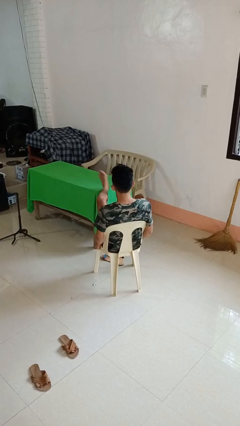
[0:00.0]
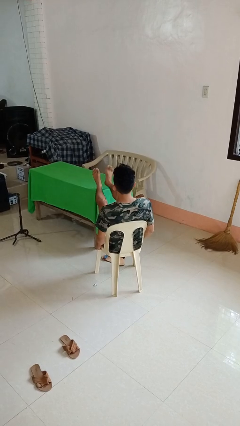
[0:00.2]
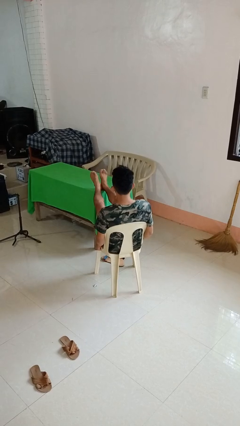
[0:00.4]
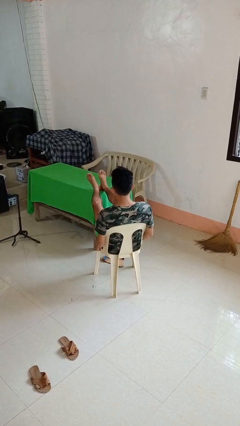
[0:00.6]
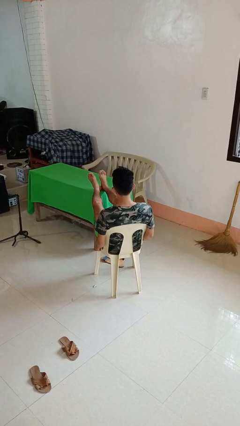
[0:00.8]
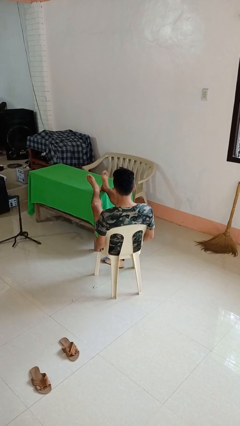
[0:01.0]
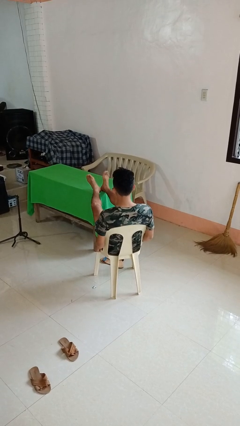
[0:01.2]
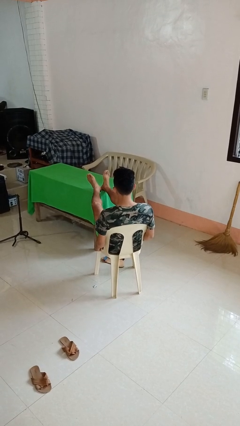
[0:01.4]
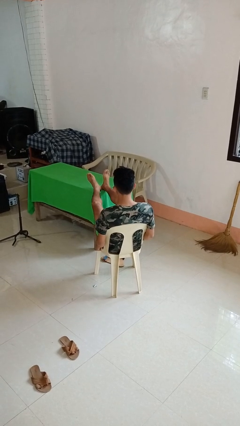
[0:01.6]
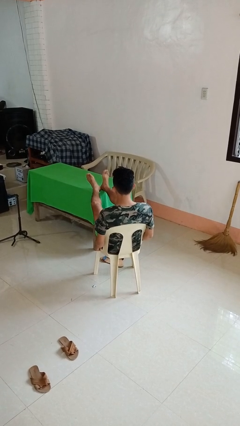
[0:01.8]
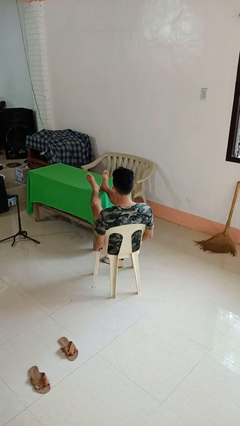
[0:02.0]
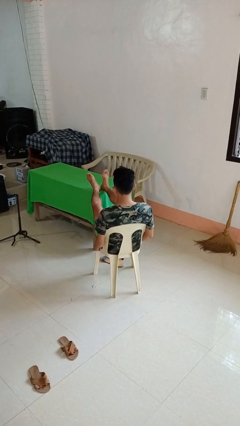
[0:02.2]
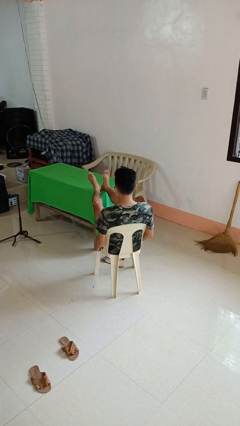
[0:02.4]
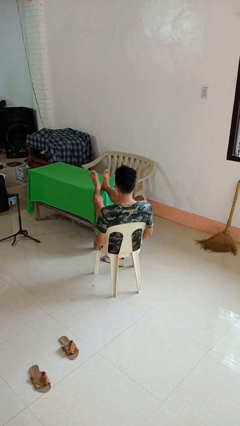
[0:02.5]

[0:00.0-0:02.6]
person puts feet up

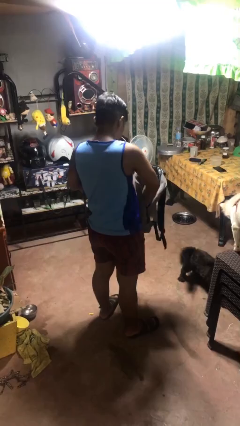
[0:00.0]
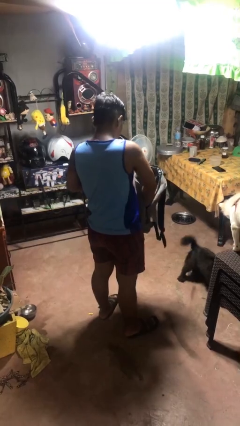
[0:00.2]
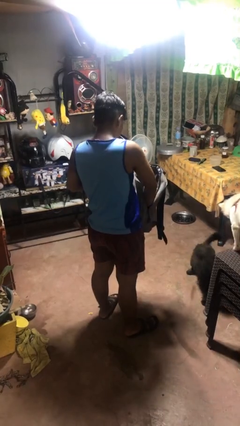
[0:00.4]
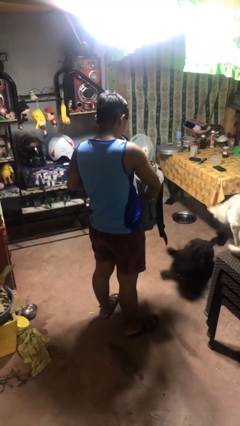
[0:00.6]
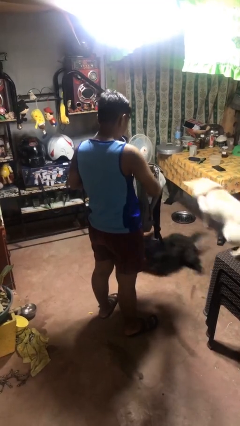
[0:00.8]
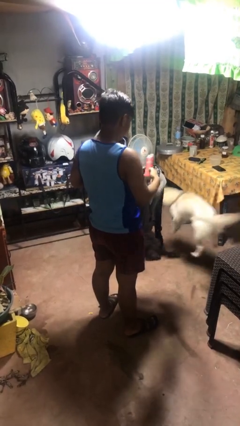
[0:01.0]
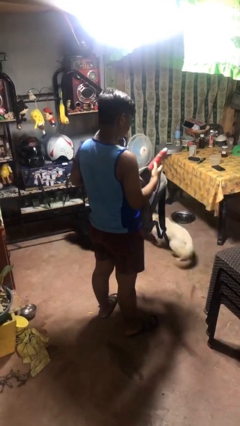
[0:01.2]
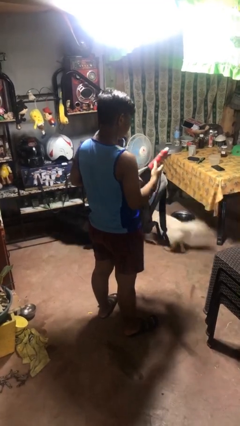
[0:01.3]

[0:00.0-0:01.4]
person takes object from bag

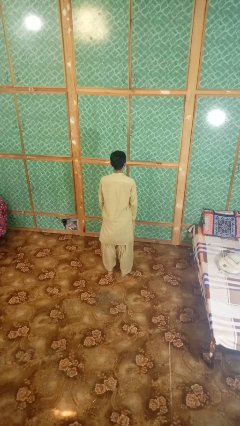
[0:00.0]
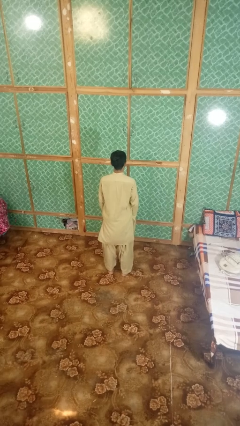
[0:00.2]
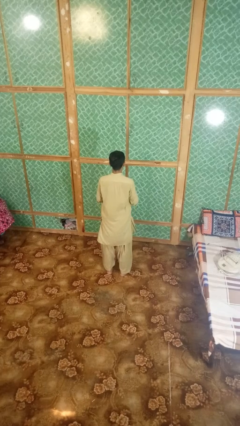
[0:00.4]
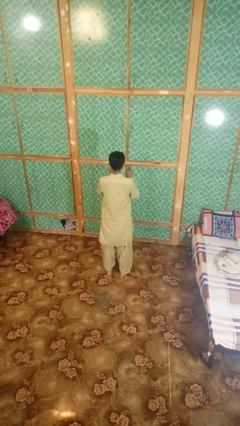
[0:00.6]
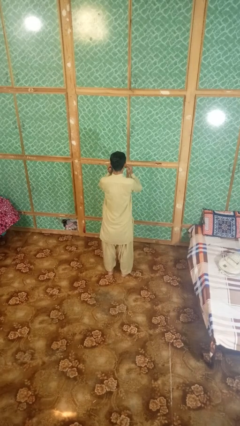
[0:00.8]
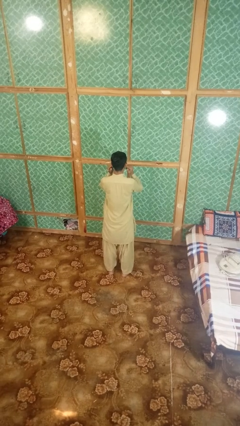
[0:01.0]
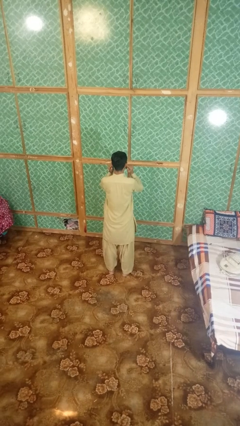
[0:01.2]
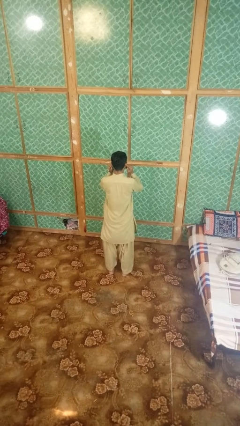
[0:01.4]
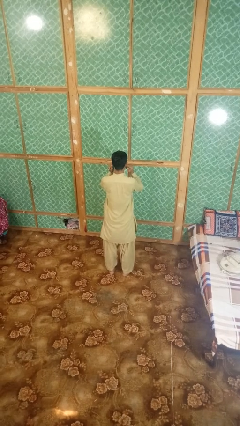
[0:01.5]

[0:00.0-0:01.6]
person puts fingers in ear

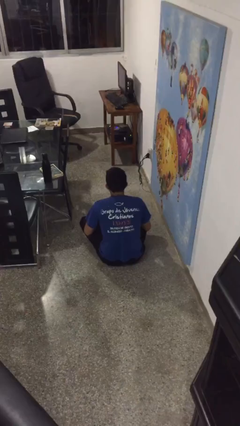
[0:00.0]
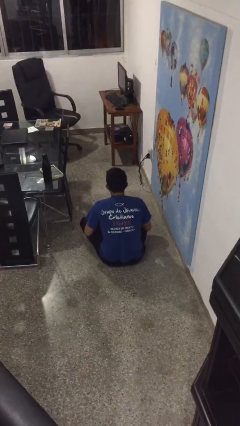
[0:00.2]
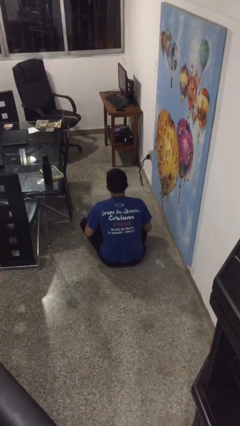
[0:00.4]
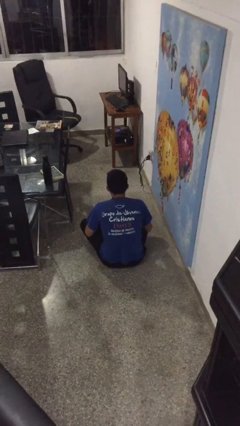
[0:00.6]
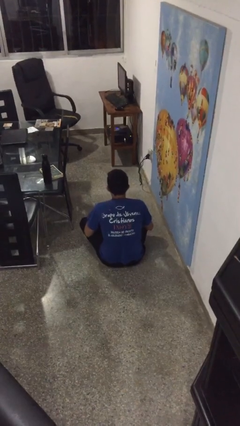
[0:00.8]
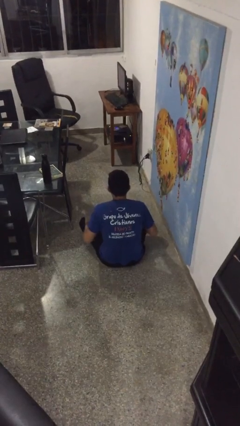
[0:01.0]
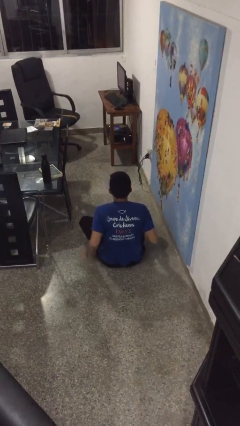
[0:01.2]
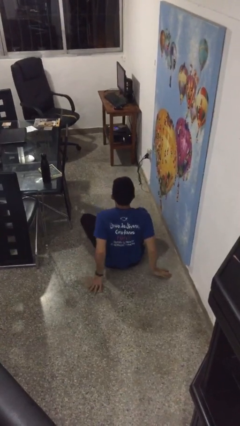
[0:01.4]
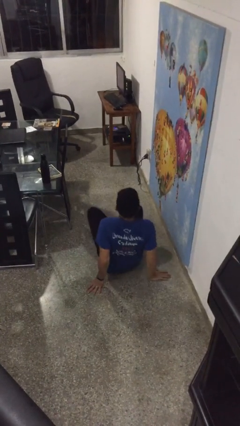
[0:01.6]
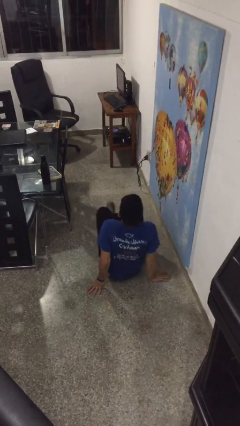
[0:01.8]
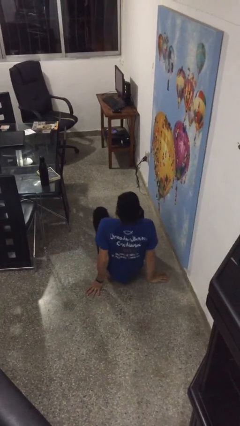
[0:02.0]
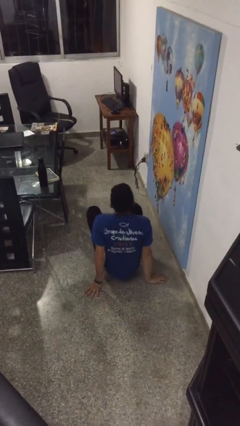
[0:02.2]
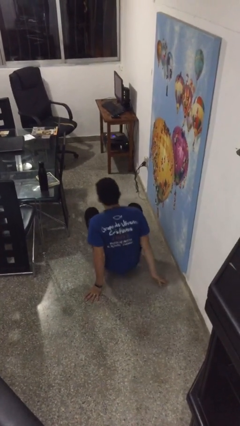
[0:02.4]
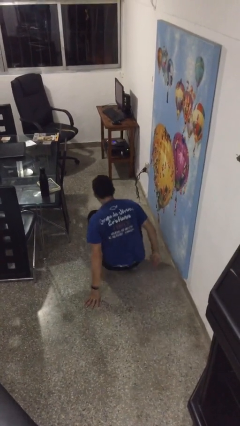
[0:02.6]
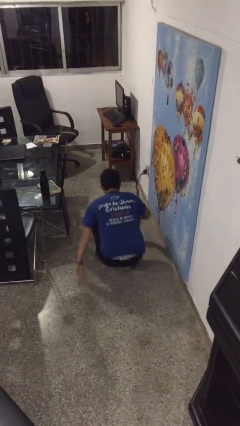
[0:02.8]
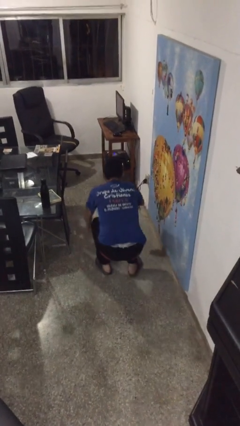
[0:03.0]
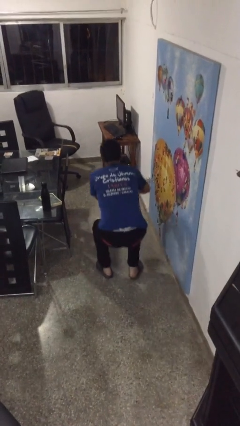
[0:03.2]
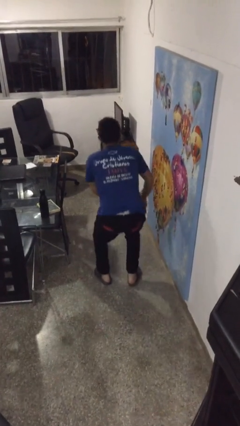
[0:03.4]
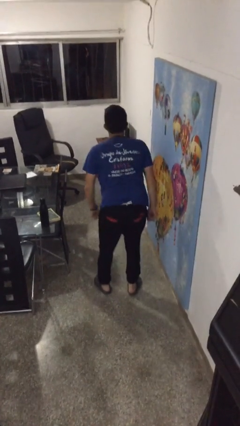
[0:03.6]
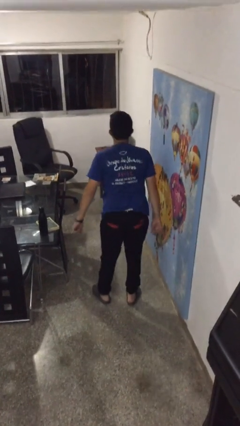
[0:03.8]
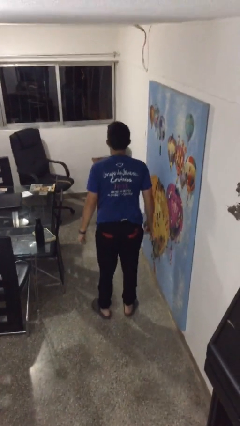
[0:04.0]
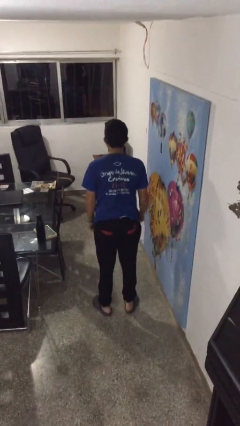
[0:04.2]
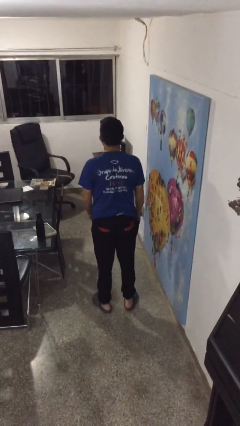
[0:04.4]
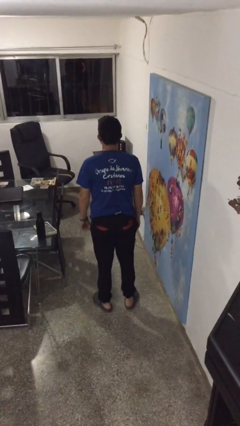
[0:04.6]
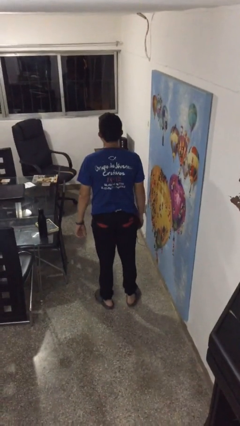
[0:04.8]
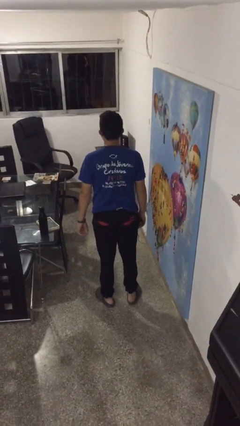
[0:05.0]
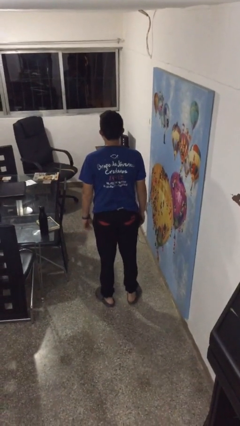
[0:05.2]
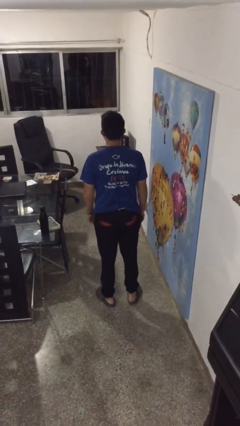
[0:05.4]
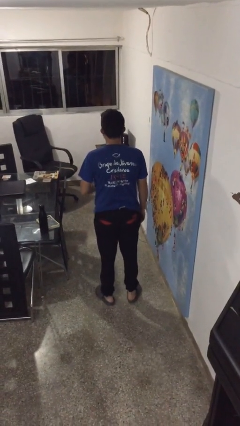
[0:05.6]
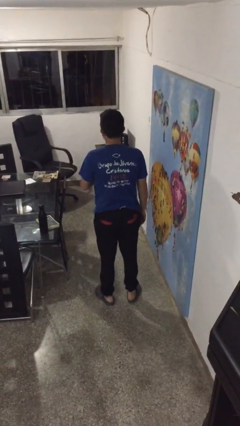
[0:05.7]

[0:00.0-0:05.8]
person stands up from floor

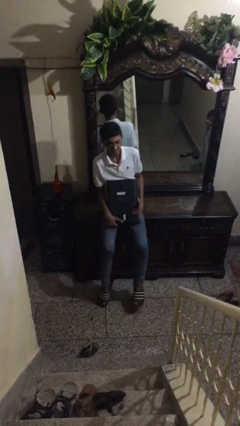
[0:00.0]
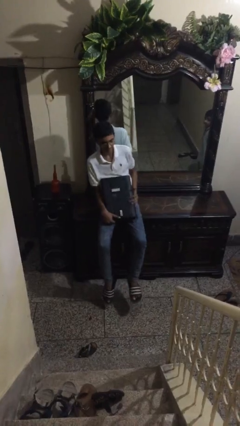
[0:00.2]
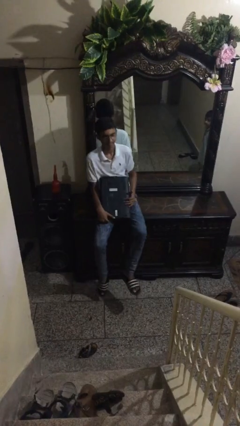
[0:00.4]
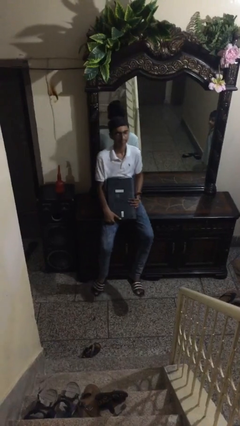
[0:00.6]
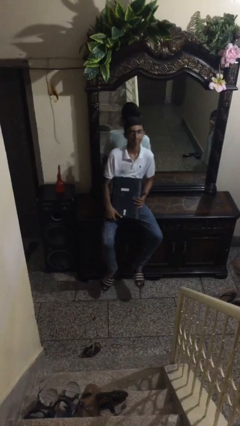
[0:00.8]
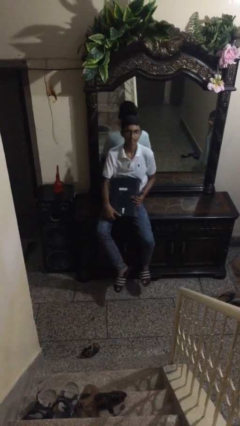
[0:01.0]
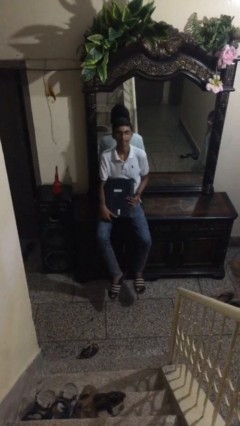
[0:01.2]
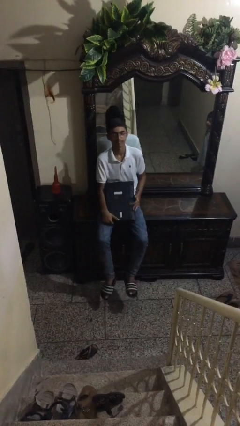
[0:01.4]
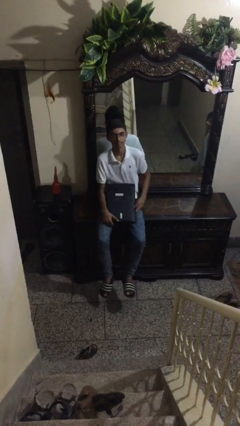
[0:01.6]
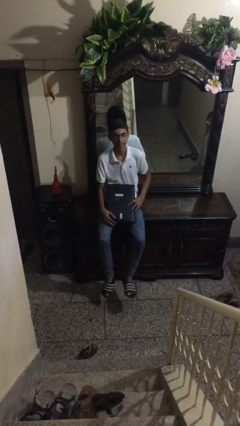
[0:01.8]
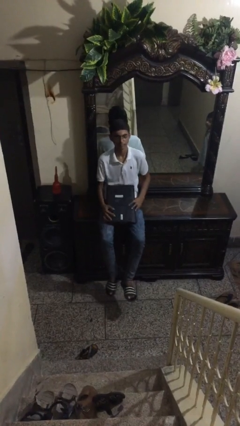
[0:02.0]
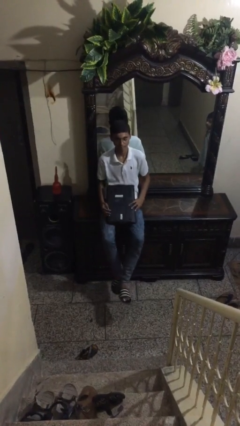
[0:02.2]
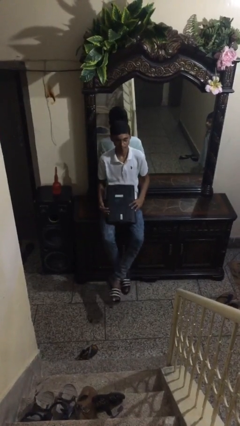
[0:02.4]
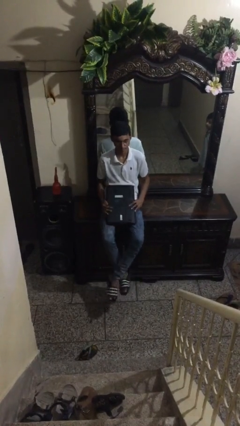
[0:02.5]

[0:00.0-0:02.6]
person sits down

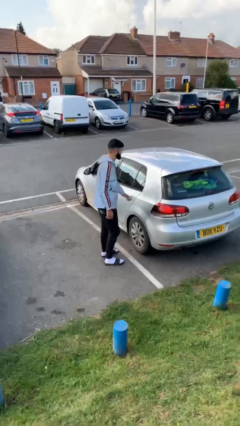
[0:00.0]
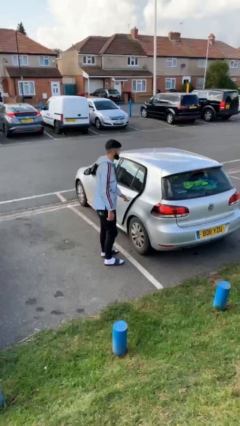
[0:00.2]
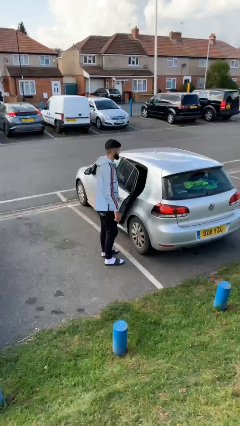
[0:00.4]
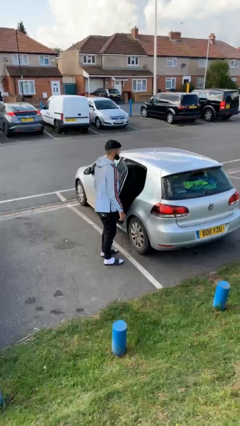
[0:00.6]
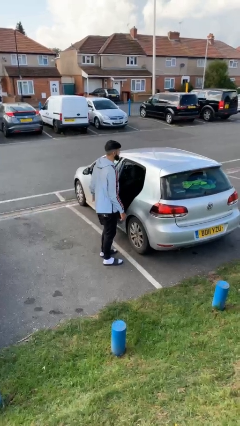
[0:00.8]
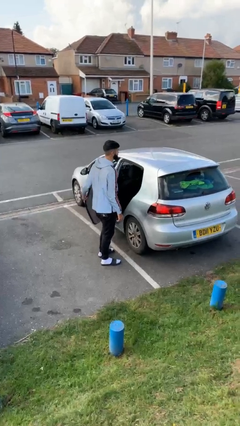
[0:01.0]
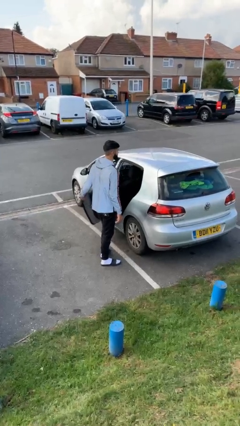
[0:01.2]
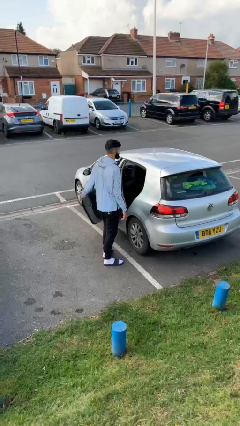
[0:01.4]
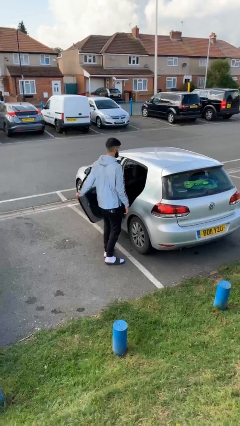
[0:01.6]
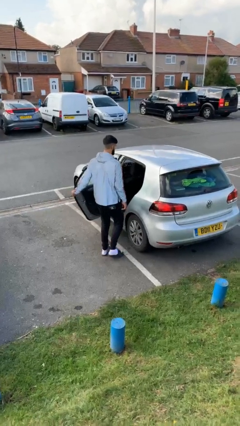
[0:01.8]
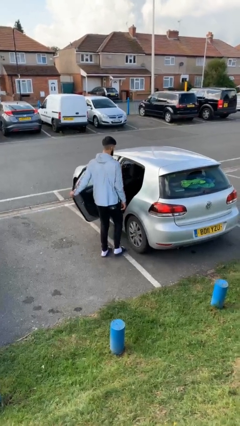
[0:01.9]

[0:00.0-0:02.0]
person opens car door

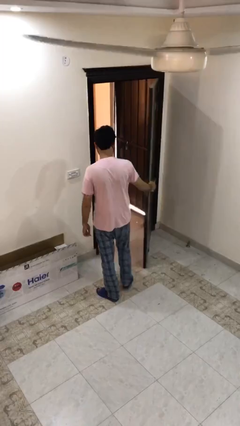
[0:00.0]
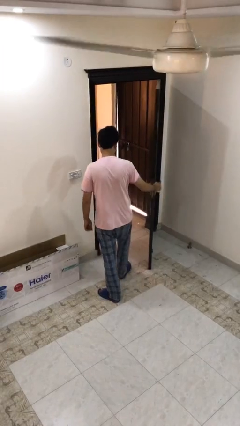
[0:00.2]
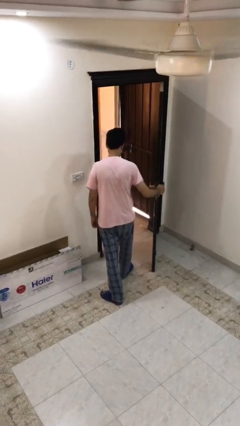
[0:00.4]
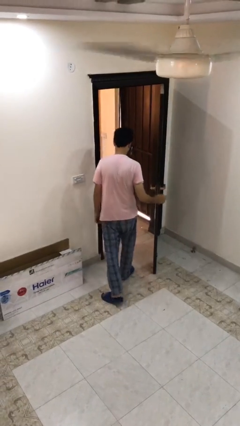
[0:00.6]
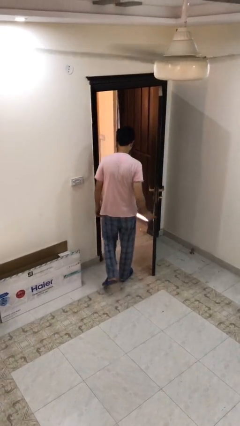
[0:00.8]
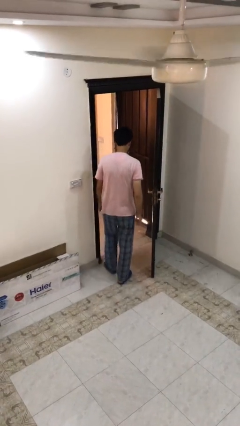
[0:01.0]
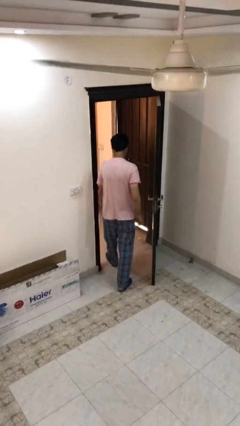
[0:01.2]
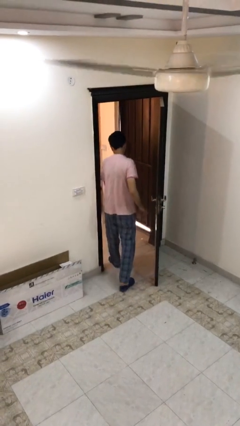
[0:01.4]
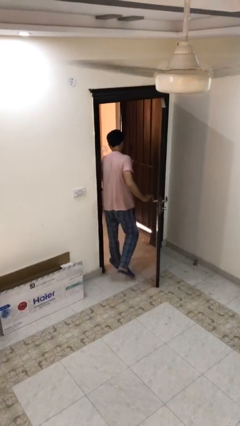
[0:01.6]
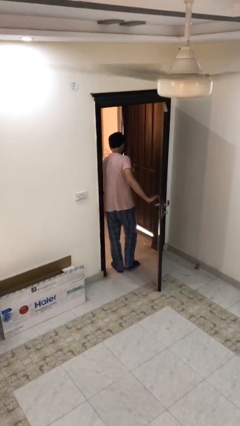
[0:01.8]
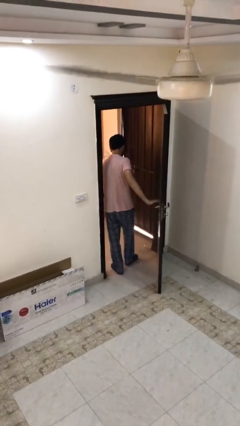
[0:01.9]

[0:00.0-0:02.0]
person exits scene through structure
